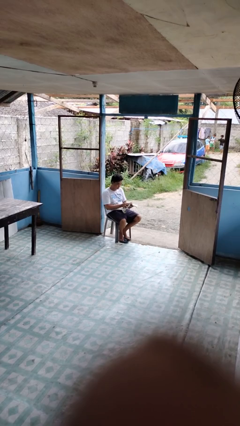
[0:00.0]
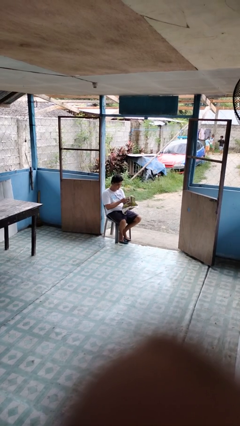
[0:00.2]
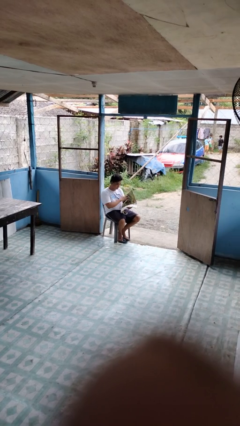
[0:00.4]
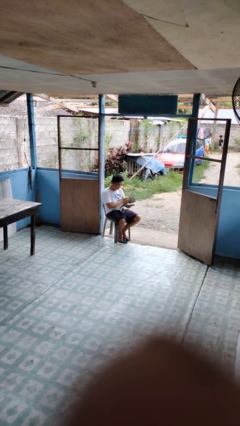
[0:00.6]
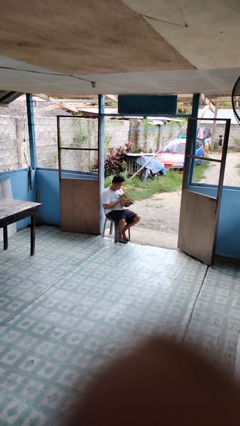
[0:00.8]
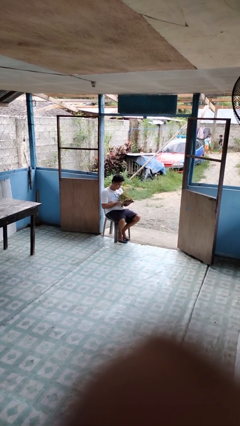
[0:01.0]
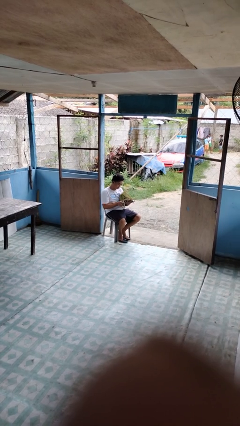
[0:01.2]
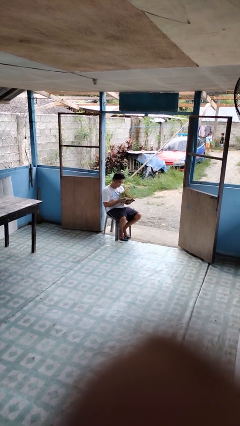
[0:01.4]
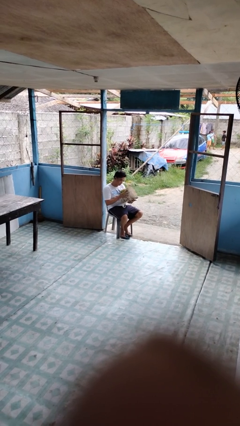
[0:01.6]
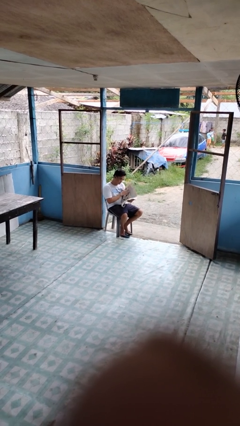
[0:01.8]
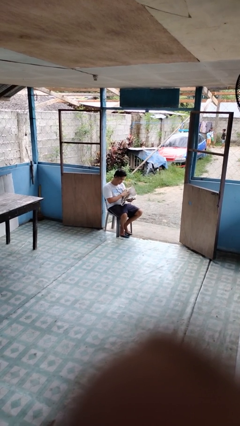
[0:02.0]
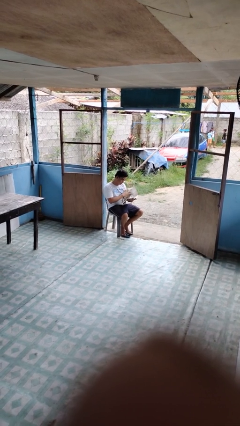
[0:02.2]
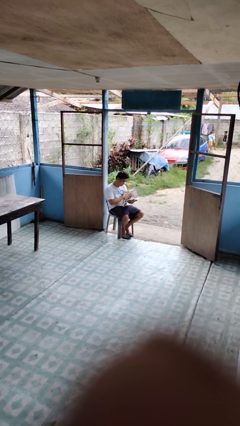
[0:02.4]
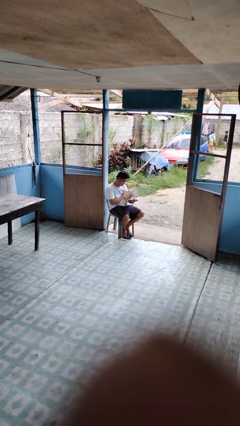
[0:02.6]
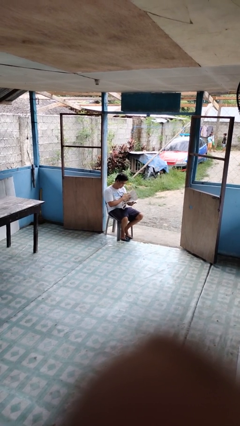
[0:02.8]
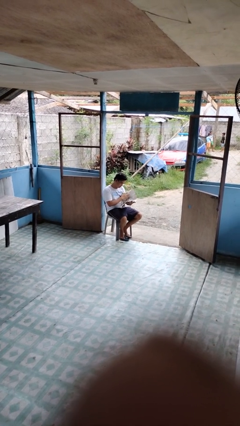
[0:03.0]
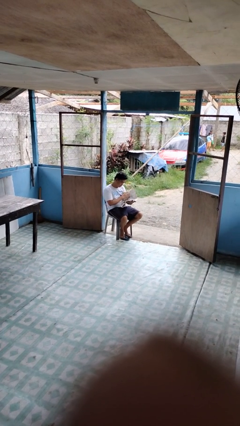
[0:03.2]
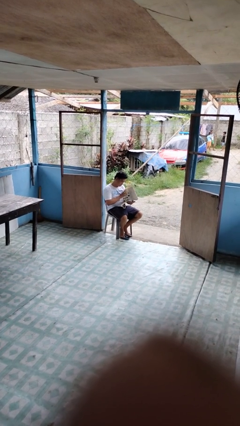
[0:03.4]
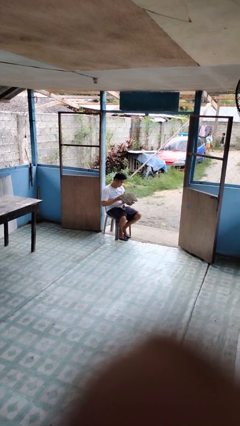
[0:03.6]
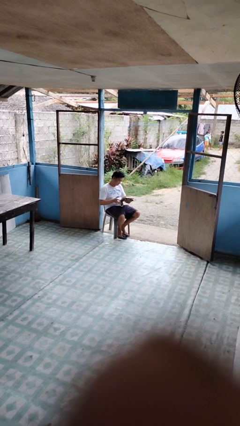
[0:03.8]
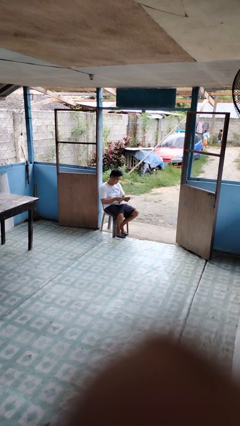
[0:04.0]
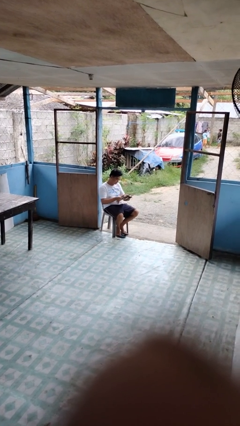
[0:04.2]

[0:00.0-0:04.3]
person reads newspaper

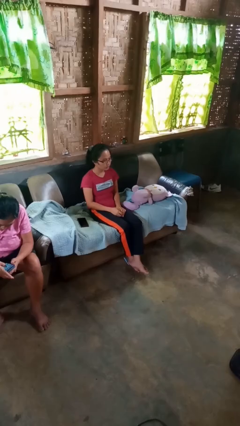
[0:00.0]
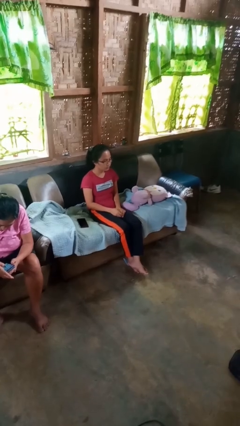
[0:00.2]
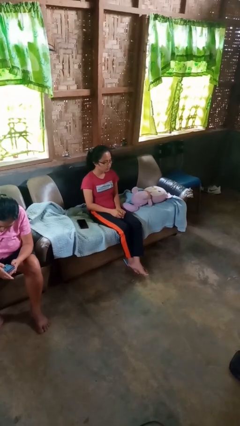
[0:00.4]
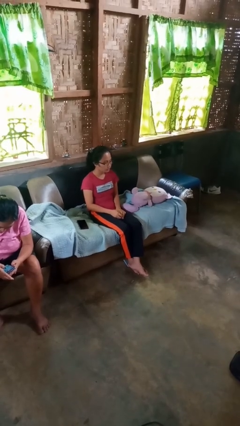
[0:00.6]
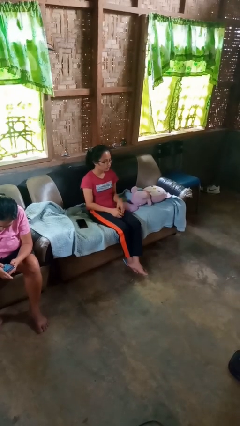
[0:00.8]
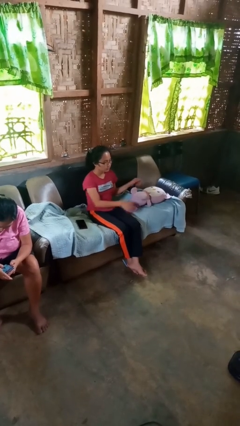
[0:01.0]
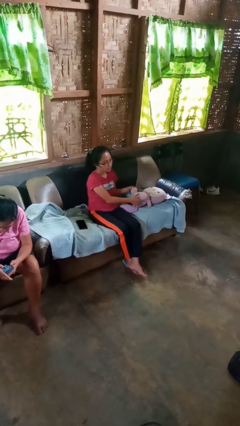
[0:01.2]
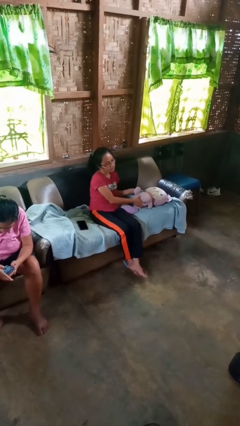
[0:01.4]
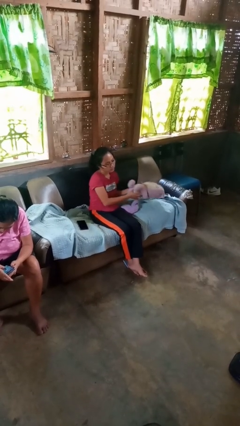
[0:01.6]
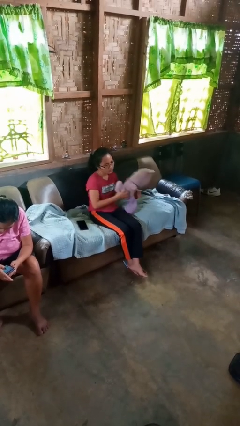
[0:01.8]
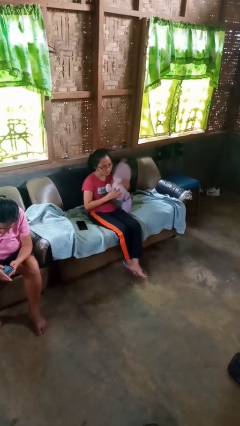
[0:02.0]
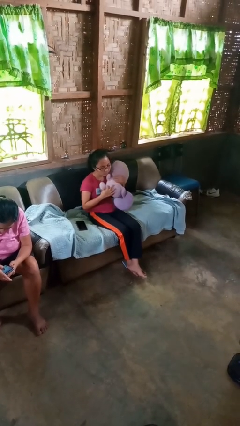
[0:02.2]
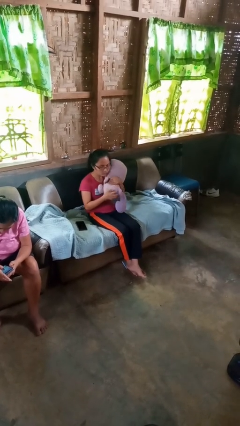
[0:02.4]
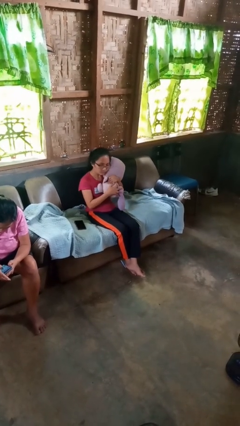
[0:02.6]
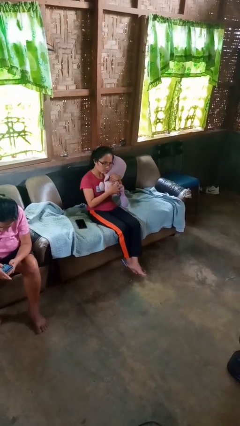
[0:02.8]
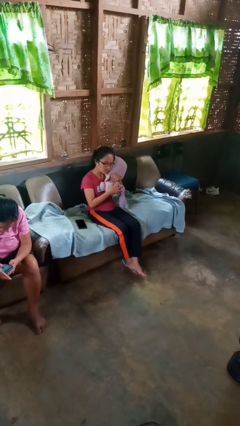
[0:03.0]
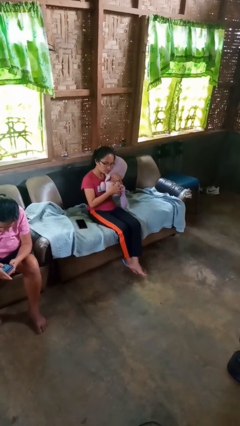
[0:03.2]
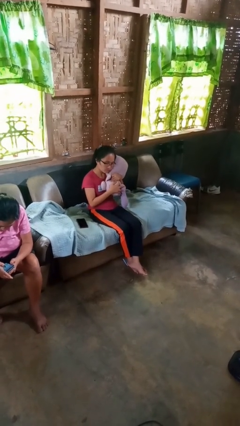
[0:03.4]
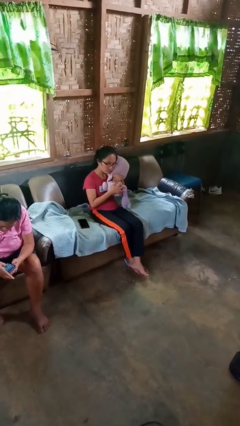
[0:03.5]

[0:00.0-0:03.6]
person hugs stuffed animal

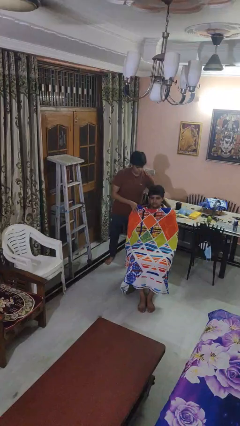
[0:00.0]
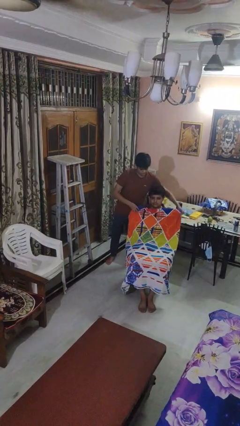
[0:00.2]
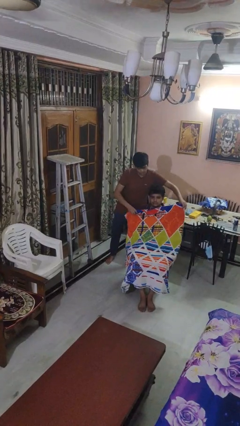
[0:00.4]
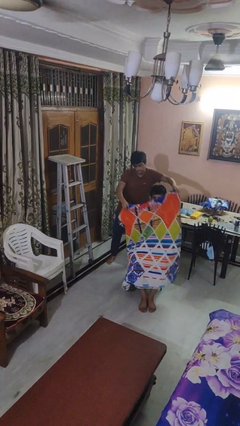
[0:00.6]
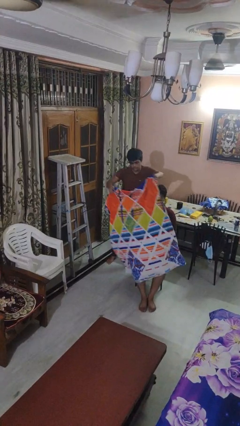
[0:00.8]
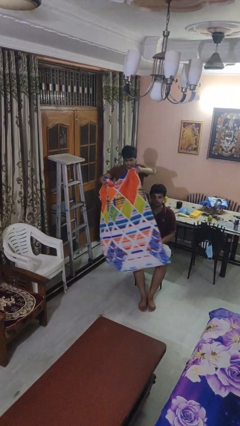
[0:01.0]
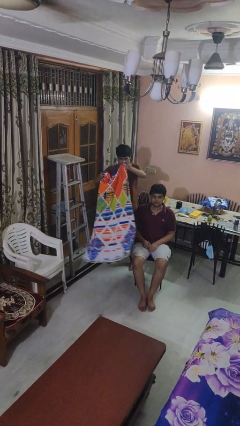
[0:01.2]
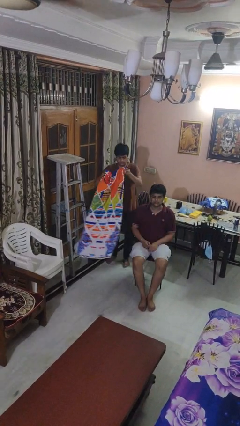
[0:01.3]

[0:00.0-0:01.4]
person uncovers friend with blanket

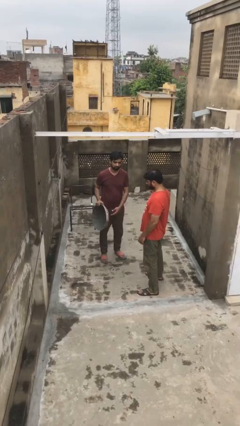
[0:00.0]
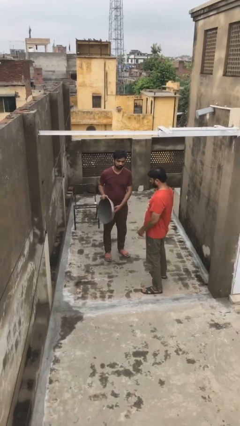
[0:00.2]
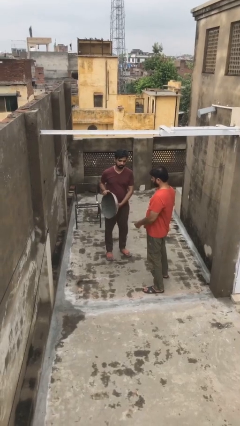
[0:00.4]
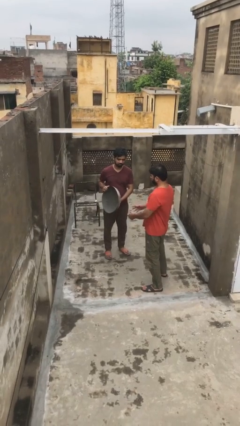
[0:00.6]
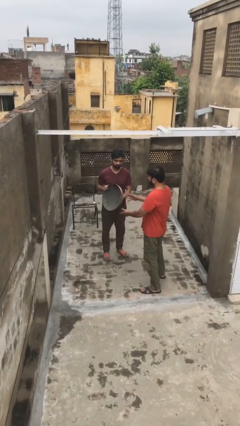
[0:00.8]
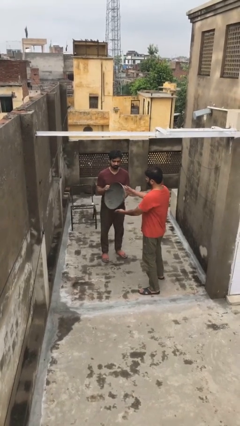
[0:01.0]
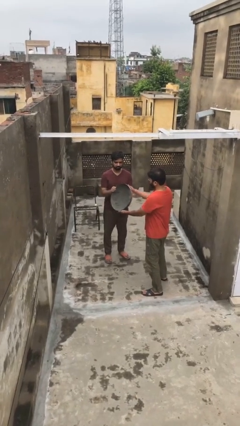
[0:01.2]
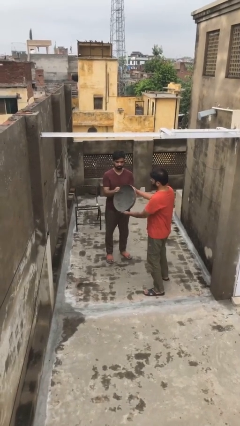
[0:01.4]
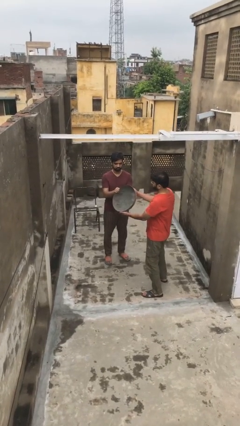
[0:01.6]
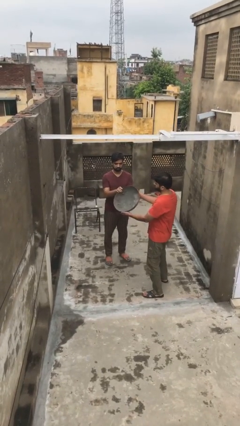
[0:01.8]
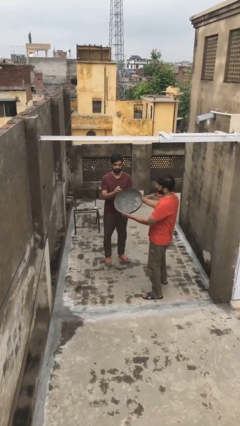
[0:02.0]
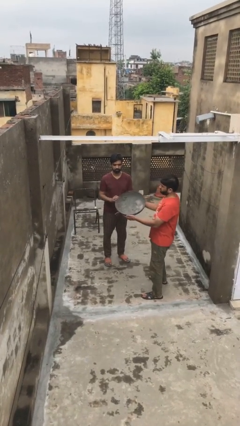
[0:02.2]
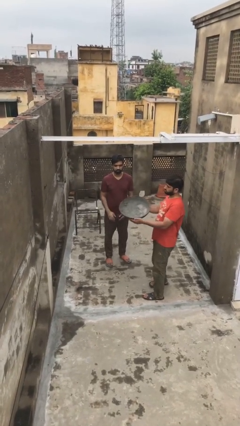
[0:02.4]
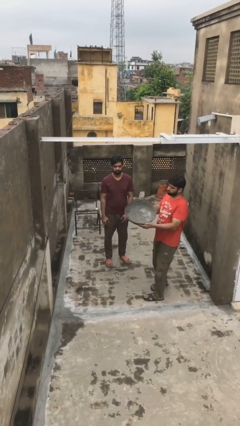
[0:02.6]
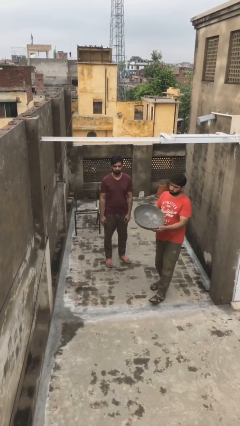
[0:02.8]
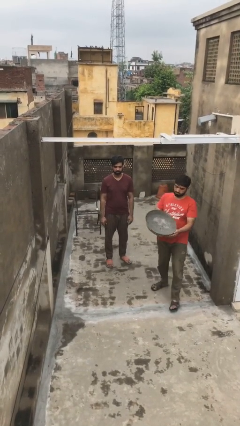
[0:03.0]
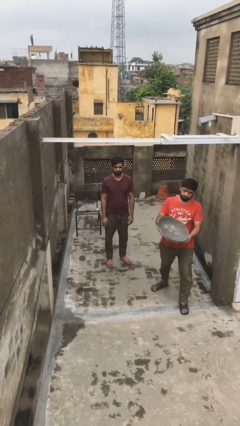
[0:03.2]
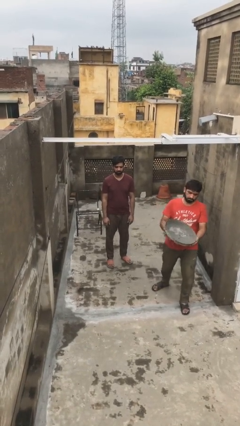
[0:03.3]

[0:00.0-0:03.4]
person transfers object to person

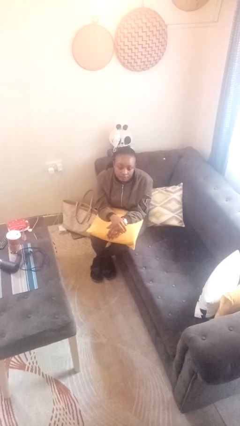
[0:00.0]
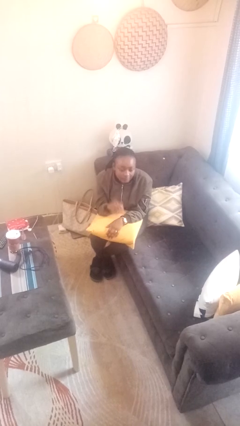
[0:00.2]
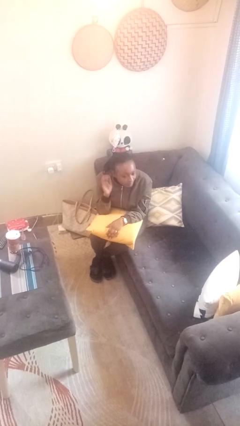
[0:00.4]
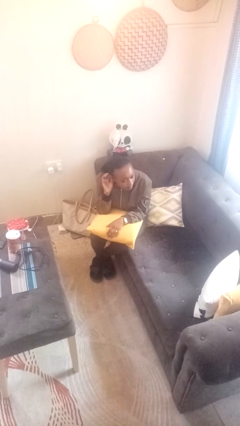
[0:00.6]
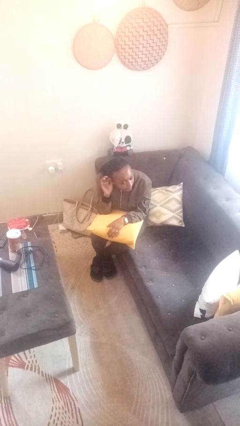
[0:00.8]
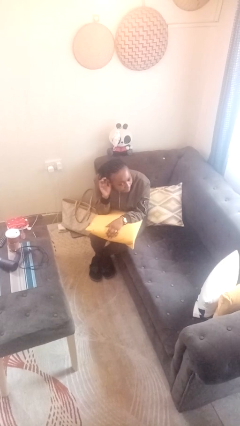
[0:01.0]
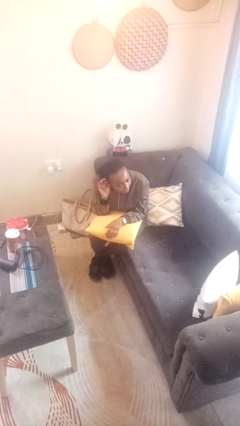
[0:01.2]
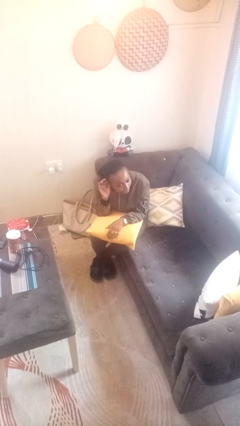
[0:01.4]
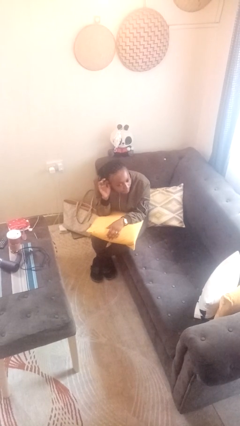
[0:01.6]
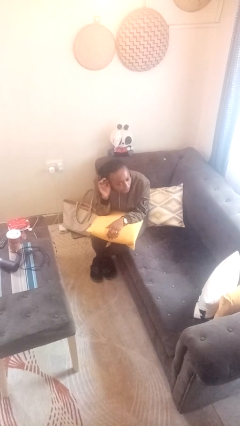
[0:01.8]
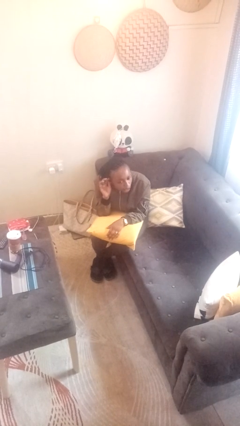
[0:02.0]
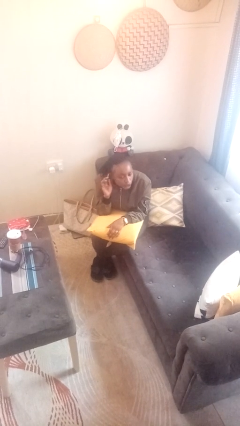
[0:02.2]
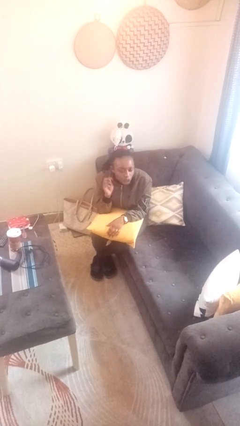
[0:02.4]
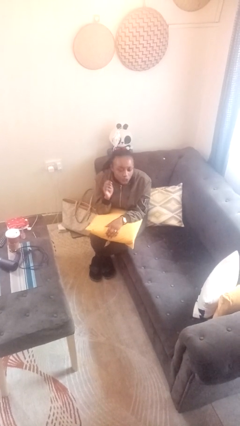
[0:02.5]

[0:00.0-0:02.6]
person gestures listen closely

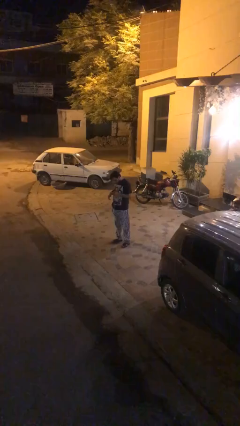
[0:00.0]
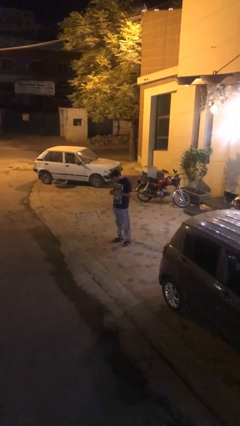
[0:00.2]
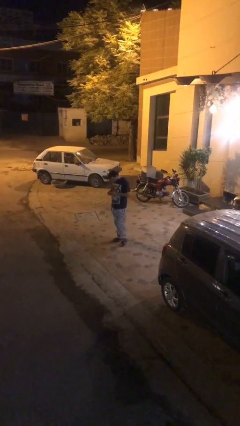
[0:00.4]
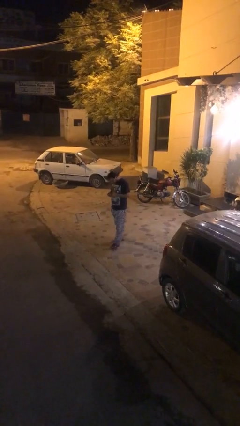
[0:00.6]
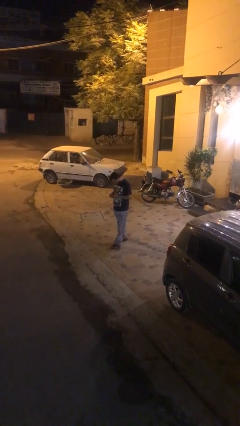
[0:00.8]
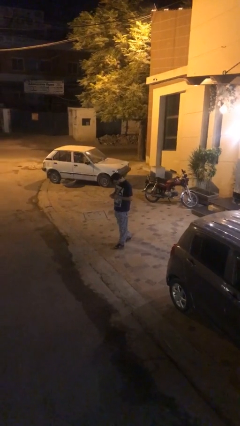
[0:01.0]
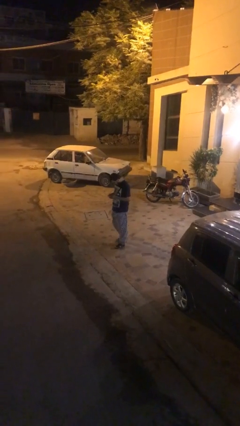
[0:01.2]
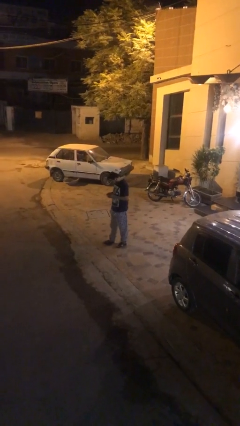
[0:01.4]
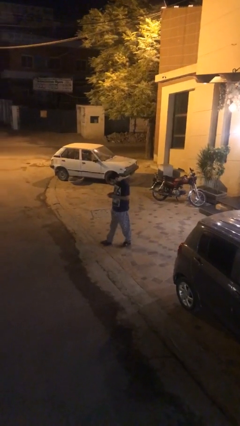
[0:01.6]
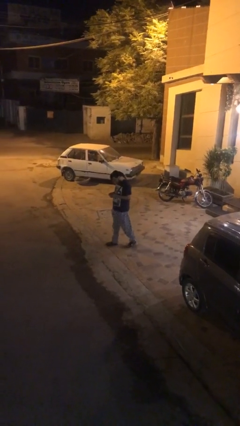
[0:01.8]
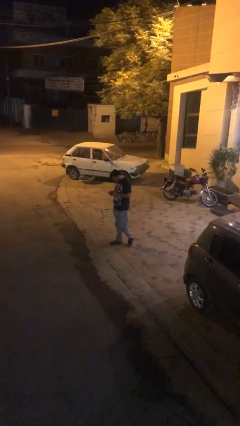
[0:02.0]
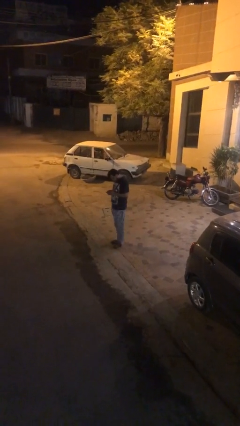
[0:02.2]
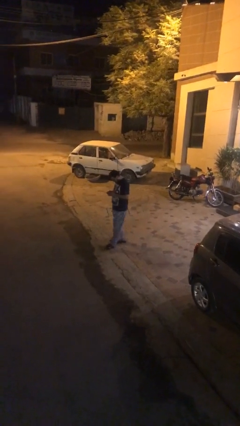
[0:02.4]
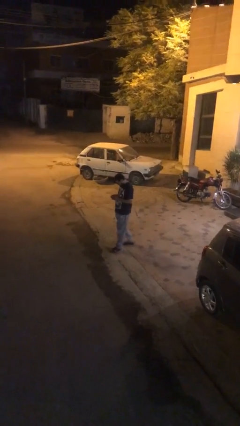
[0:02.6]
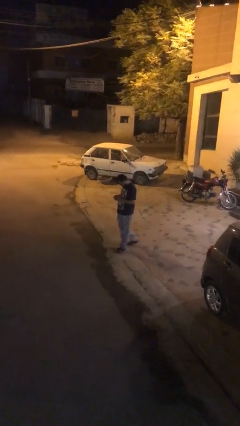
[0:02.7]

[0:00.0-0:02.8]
person texts on phone
